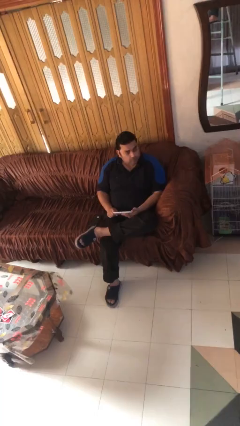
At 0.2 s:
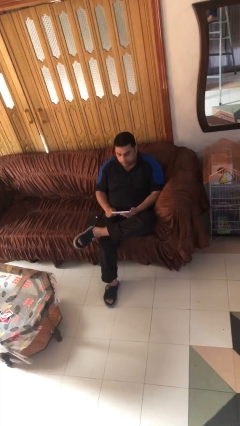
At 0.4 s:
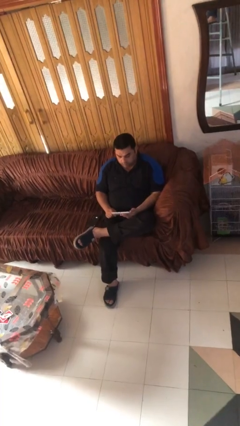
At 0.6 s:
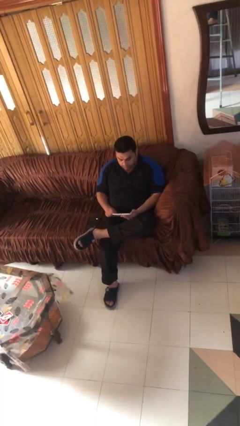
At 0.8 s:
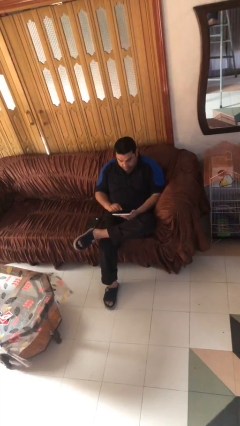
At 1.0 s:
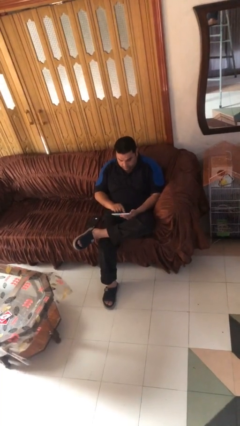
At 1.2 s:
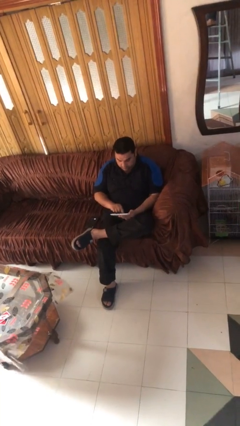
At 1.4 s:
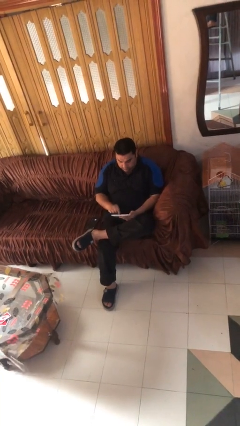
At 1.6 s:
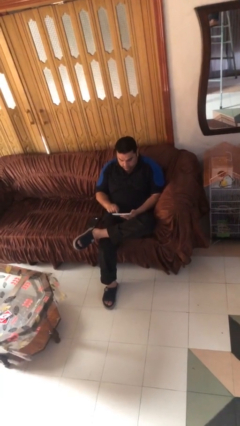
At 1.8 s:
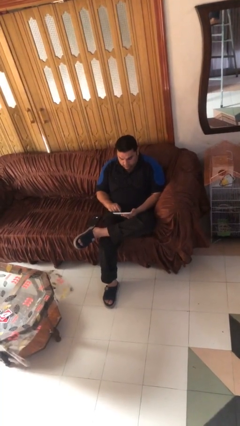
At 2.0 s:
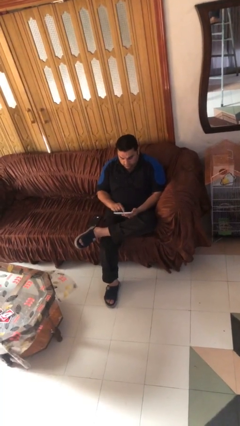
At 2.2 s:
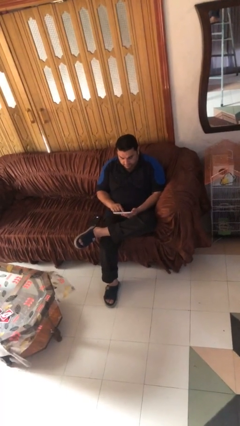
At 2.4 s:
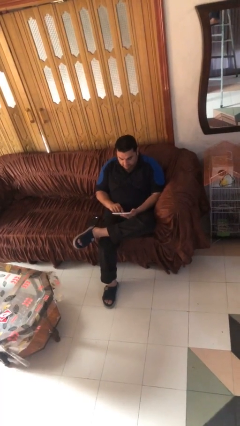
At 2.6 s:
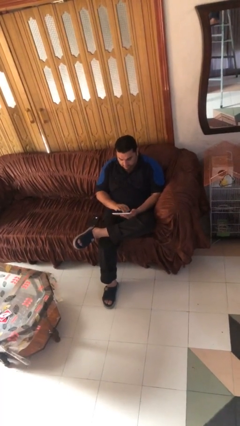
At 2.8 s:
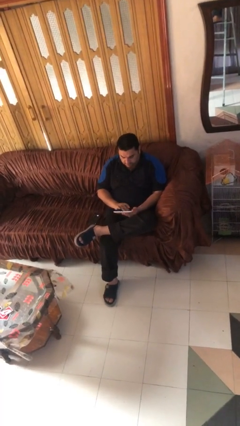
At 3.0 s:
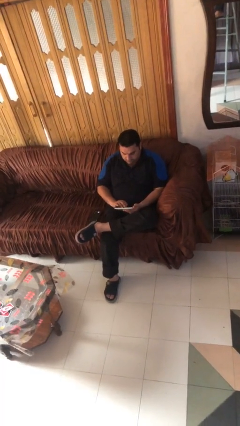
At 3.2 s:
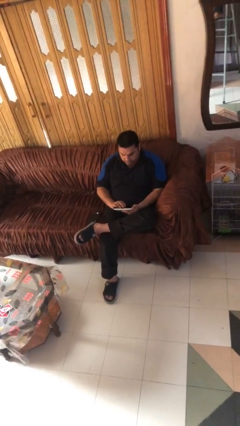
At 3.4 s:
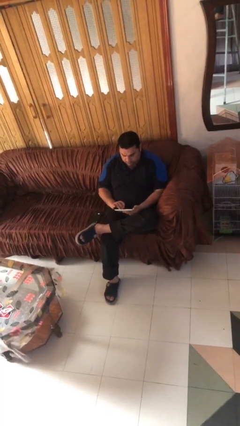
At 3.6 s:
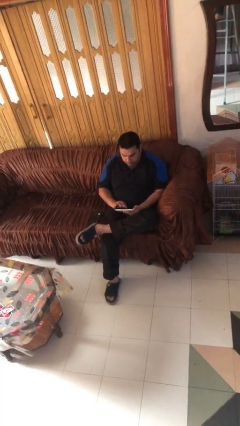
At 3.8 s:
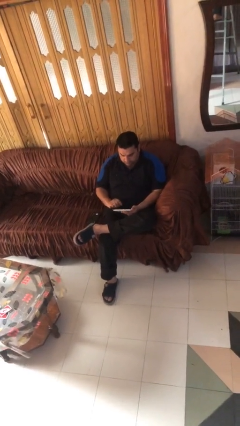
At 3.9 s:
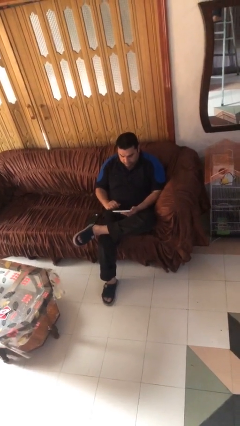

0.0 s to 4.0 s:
person interacts with tablet

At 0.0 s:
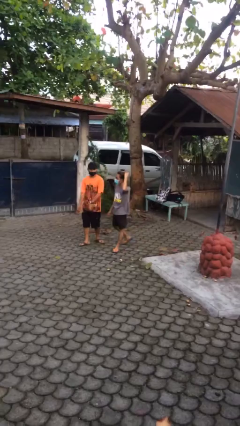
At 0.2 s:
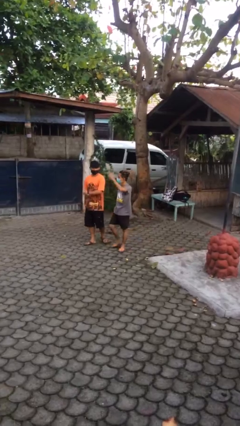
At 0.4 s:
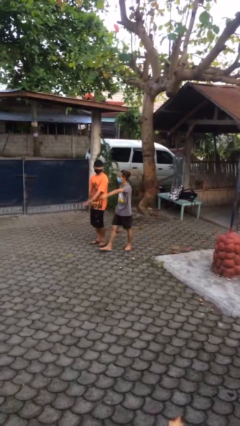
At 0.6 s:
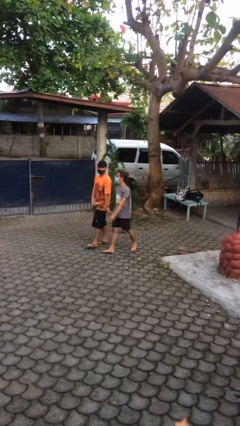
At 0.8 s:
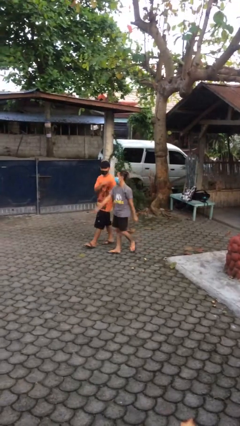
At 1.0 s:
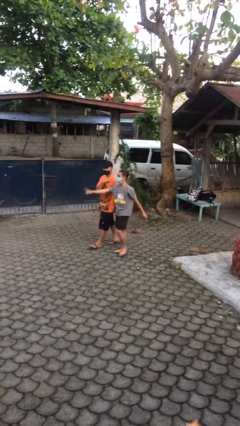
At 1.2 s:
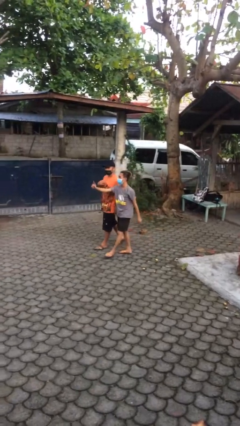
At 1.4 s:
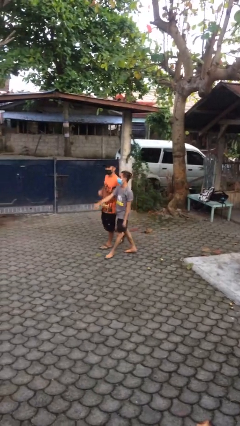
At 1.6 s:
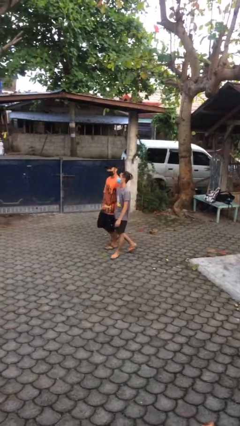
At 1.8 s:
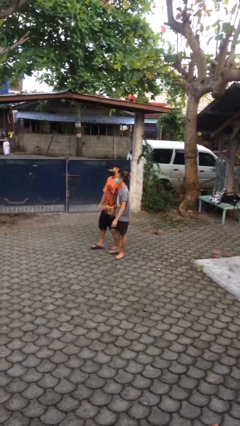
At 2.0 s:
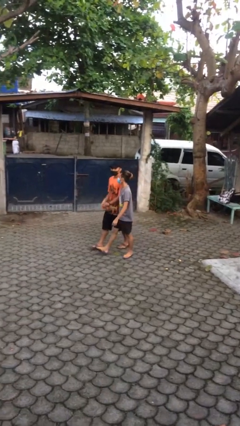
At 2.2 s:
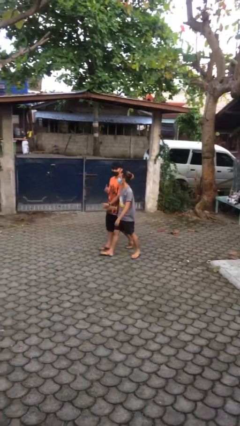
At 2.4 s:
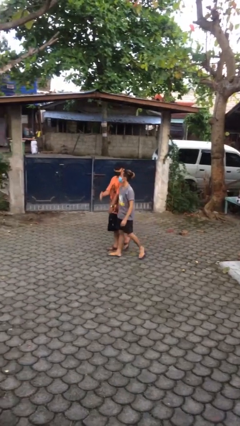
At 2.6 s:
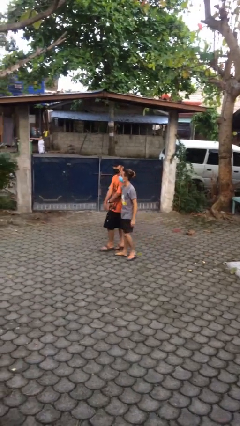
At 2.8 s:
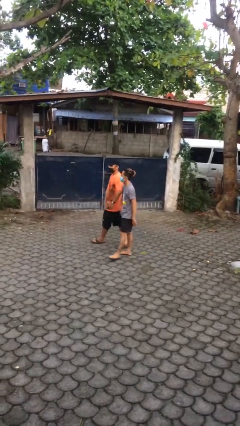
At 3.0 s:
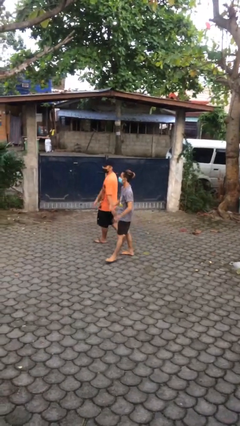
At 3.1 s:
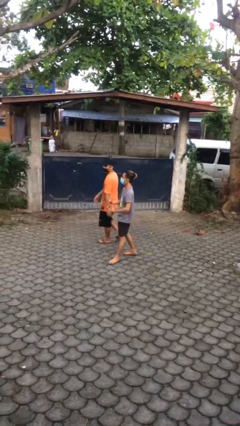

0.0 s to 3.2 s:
person talks to person

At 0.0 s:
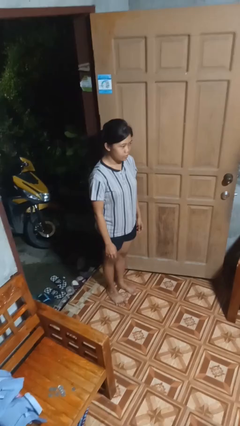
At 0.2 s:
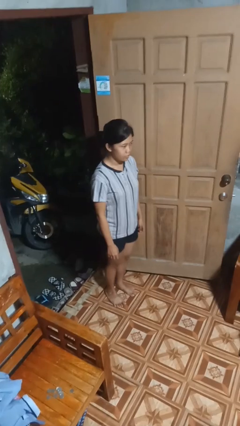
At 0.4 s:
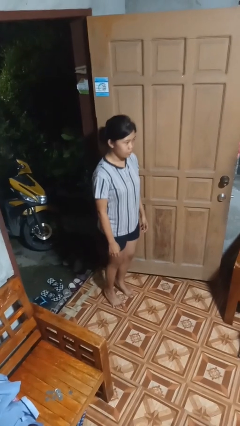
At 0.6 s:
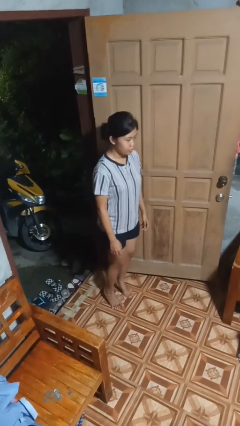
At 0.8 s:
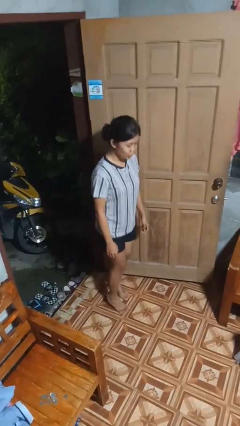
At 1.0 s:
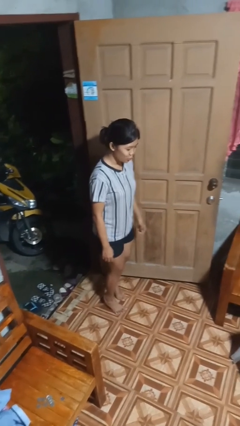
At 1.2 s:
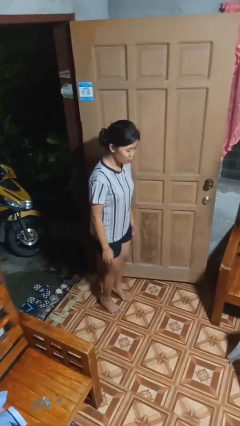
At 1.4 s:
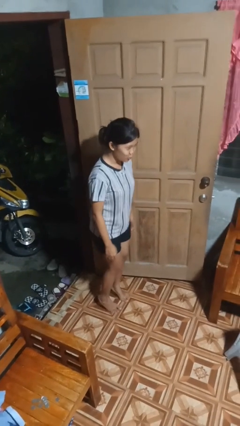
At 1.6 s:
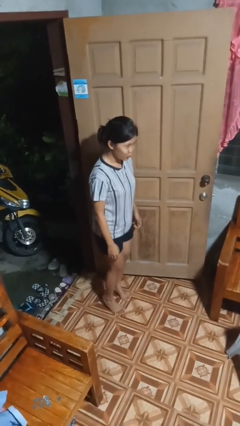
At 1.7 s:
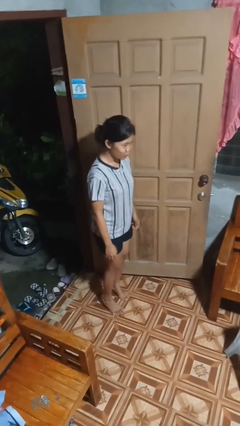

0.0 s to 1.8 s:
person walks tiptoe

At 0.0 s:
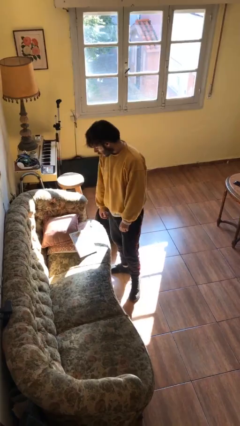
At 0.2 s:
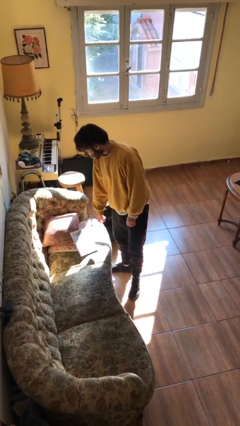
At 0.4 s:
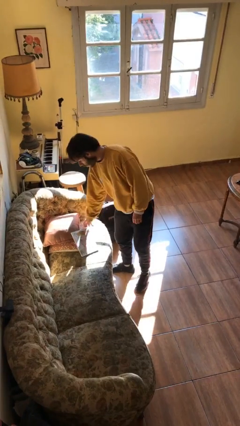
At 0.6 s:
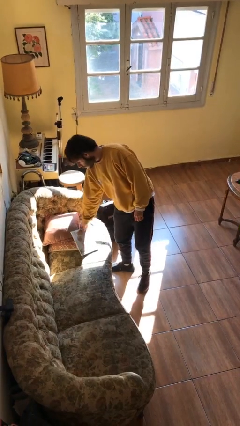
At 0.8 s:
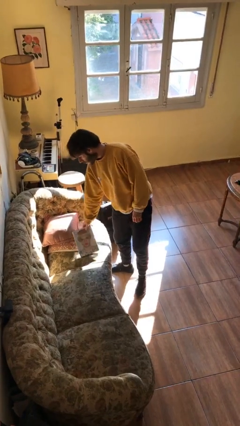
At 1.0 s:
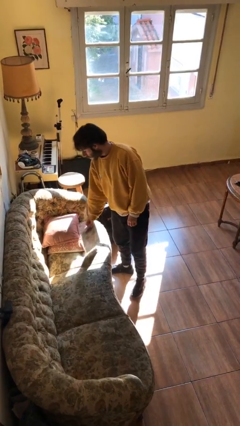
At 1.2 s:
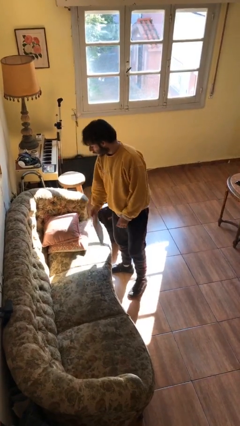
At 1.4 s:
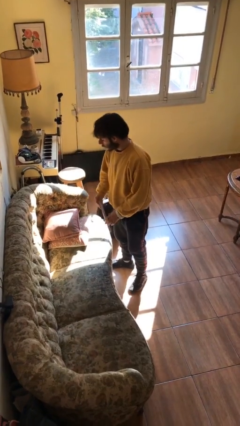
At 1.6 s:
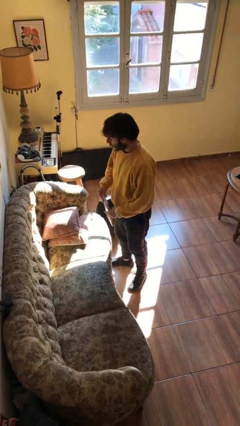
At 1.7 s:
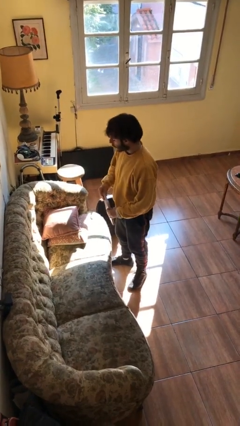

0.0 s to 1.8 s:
person picks up object from couch

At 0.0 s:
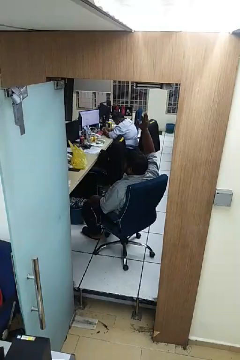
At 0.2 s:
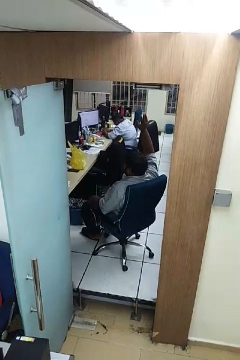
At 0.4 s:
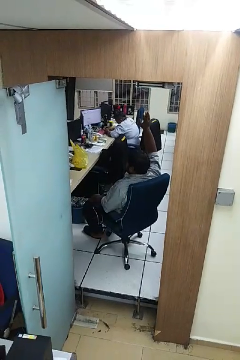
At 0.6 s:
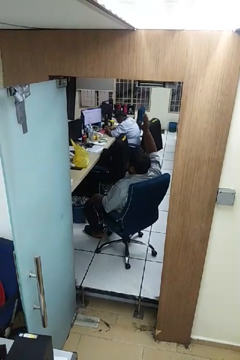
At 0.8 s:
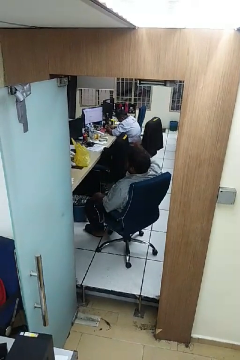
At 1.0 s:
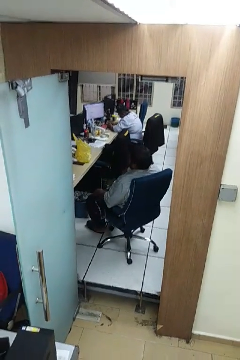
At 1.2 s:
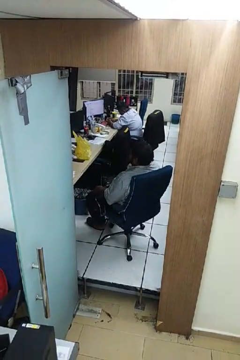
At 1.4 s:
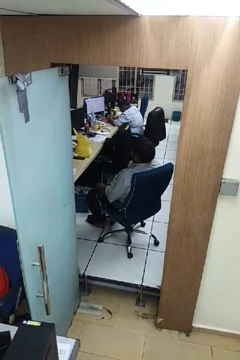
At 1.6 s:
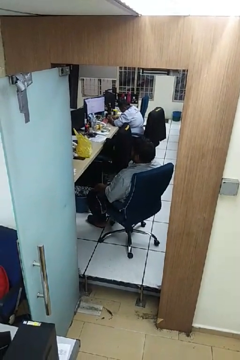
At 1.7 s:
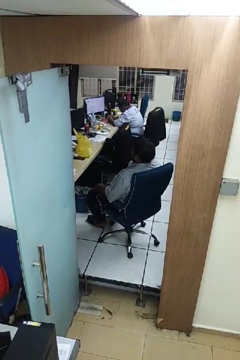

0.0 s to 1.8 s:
person gestures lower hand

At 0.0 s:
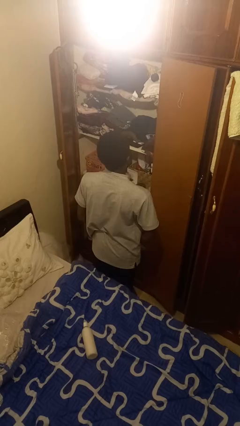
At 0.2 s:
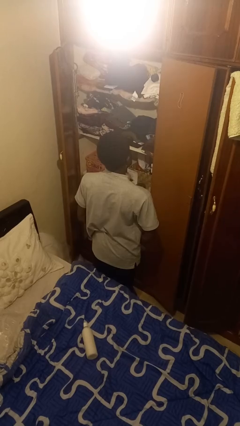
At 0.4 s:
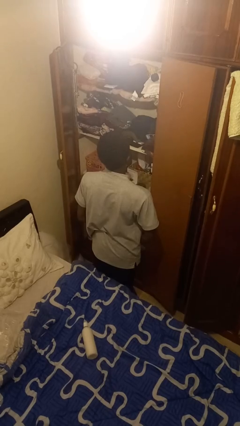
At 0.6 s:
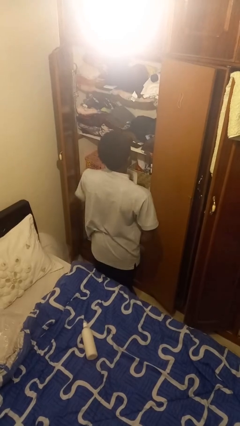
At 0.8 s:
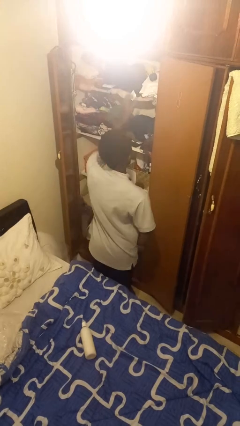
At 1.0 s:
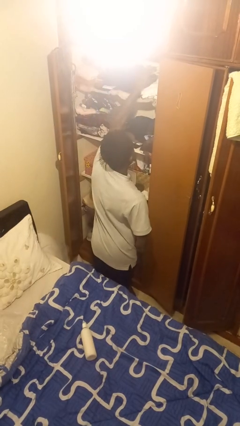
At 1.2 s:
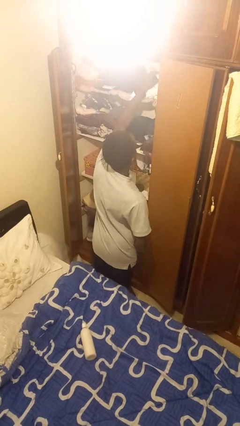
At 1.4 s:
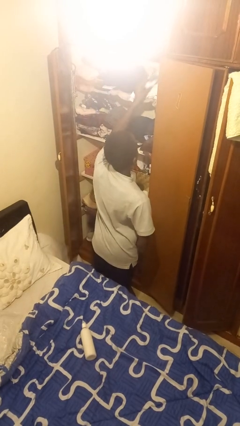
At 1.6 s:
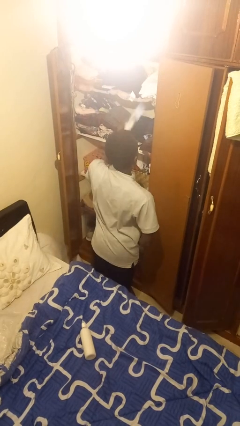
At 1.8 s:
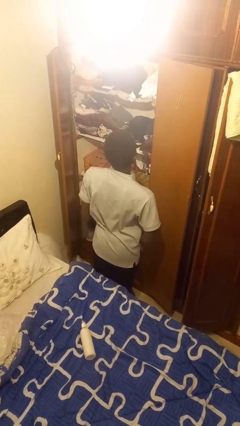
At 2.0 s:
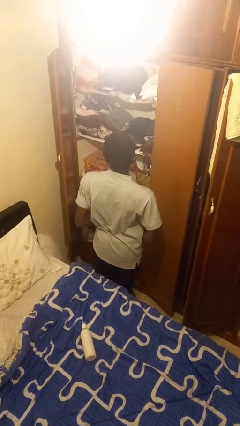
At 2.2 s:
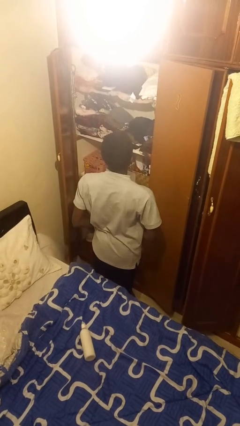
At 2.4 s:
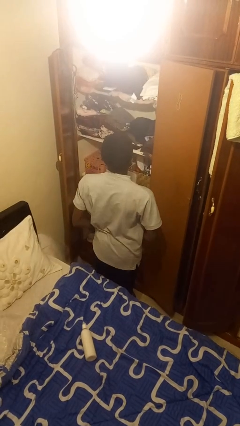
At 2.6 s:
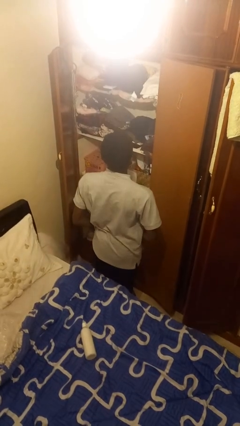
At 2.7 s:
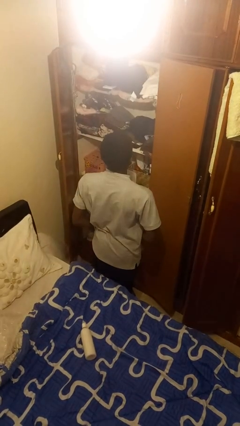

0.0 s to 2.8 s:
person picks up object from shelf

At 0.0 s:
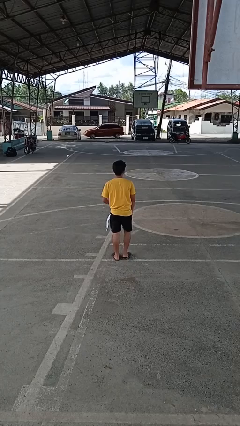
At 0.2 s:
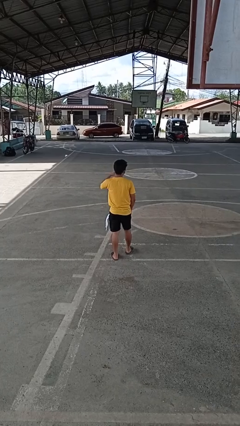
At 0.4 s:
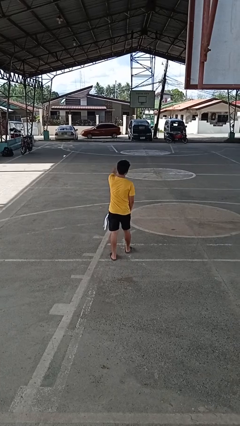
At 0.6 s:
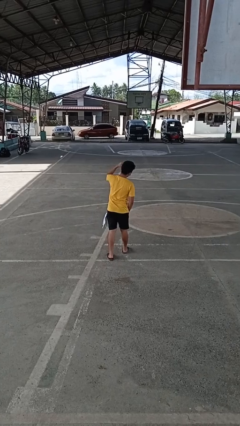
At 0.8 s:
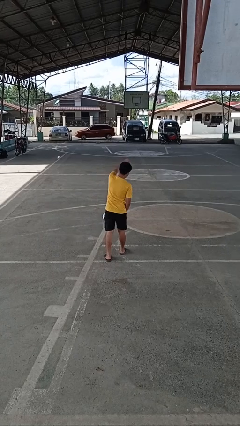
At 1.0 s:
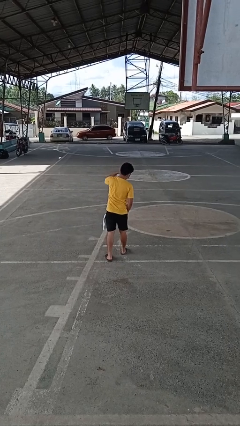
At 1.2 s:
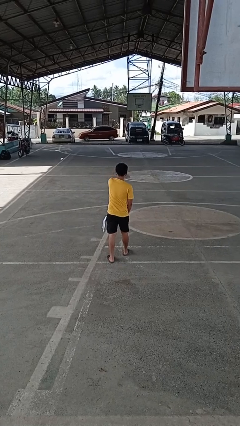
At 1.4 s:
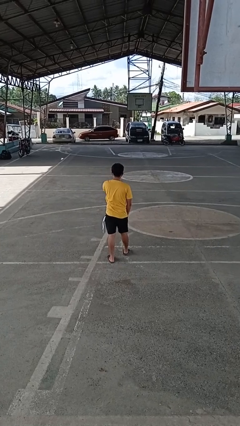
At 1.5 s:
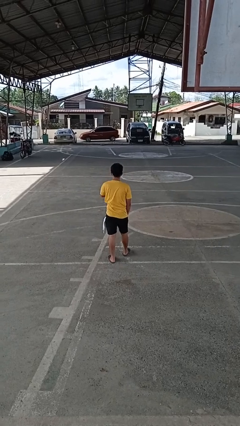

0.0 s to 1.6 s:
person punches

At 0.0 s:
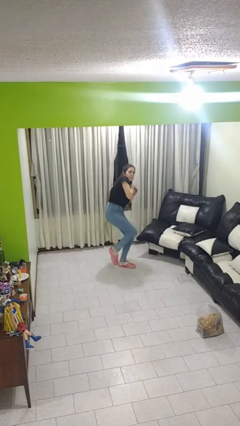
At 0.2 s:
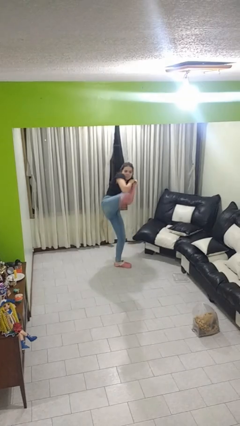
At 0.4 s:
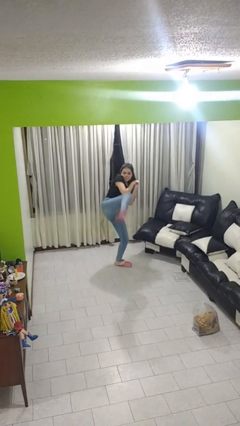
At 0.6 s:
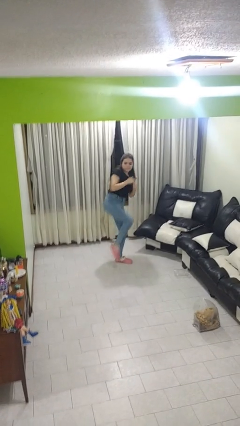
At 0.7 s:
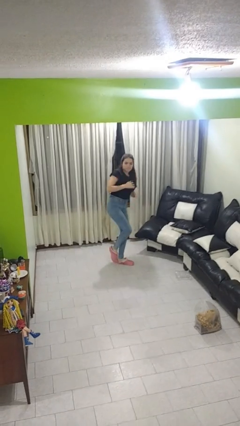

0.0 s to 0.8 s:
person karate kicks
